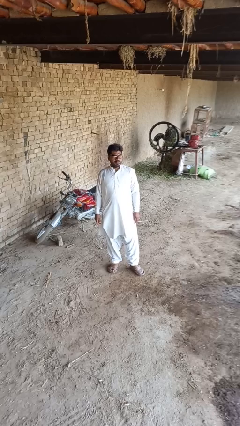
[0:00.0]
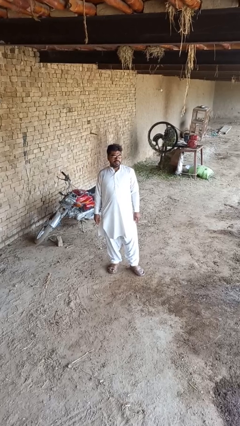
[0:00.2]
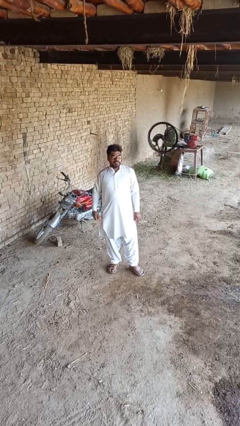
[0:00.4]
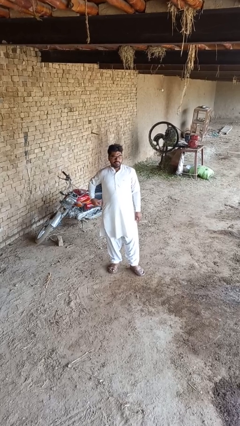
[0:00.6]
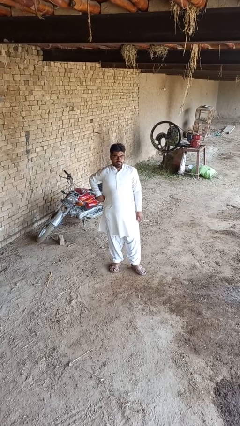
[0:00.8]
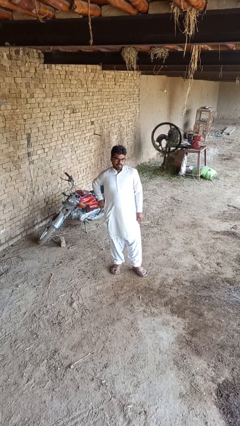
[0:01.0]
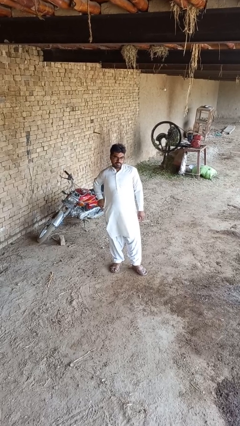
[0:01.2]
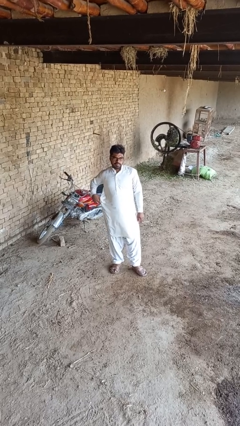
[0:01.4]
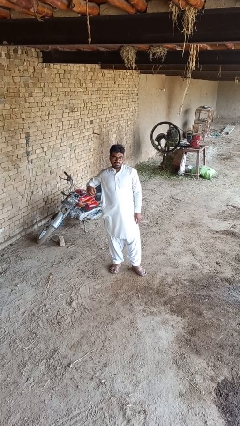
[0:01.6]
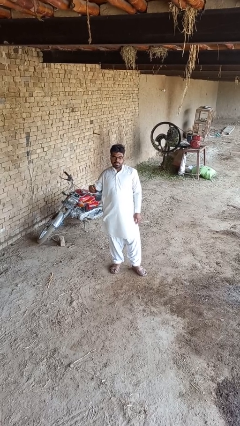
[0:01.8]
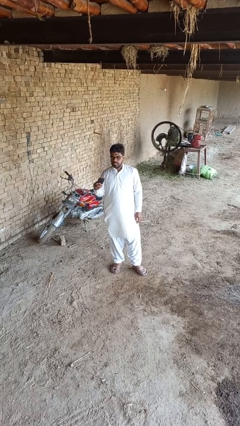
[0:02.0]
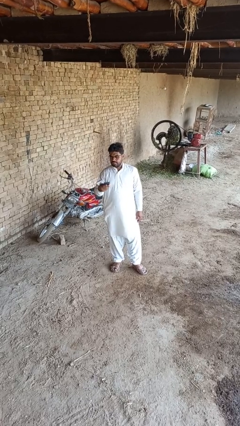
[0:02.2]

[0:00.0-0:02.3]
person takes phone from pocket

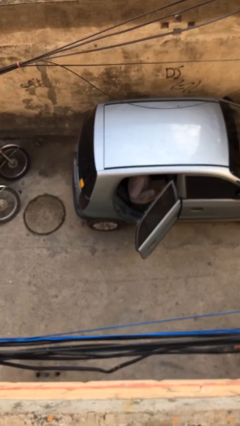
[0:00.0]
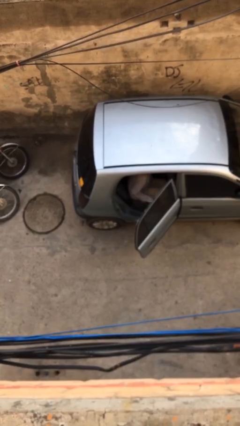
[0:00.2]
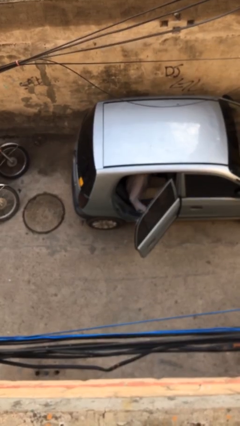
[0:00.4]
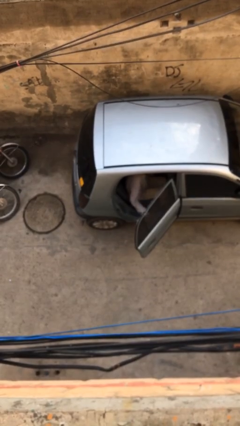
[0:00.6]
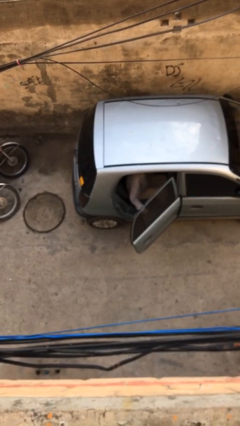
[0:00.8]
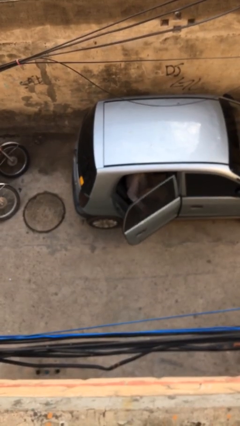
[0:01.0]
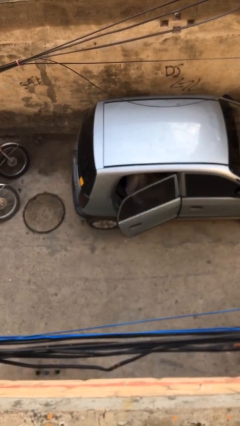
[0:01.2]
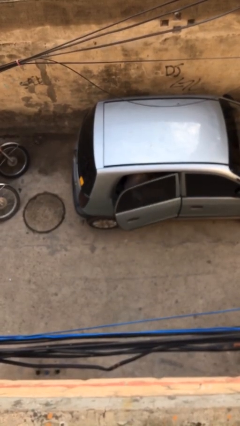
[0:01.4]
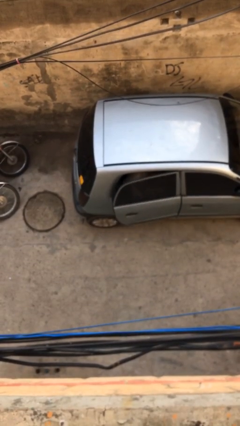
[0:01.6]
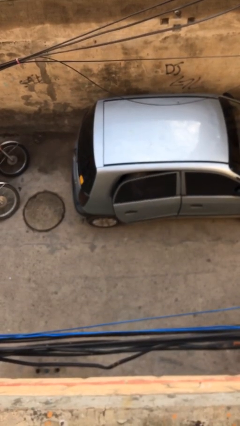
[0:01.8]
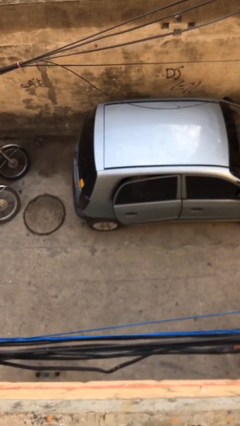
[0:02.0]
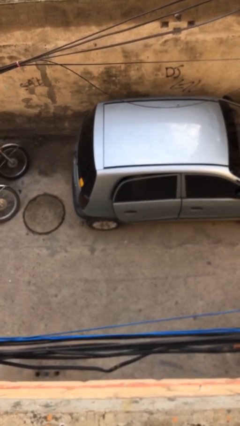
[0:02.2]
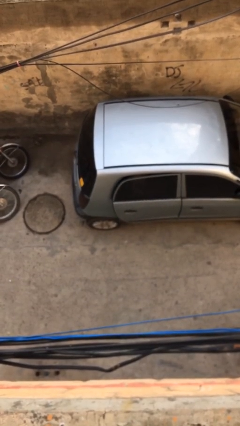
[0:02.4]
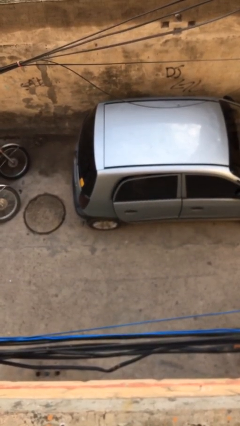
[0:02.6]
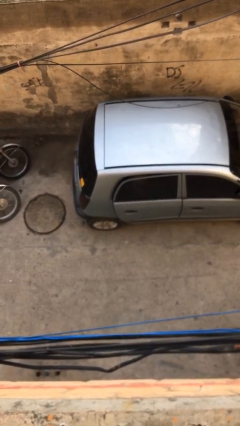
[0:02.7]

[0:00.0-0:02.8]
person closes car door

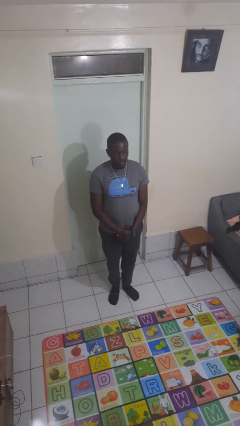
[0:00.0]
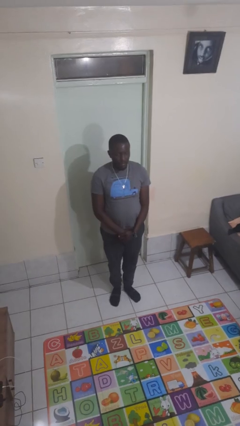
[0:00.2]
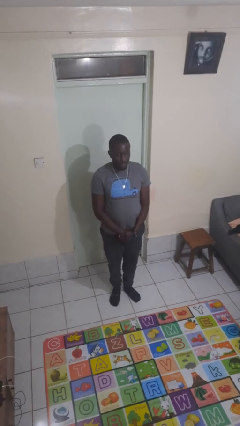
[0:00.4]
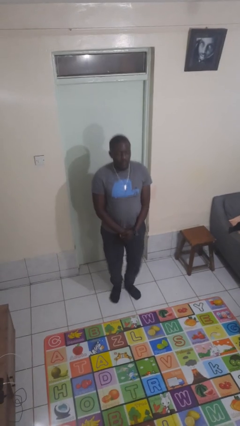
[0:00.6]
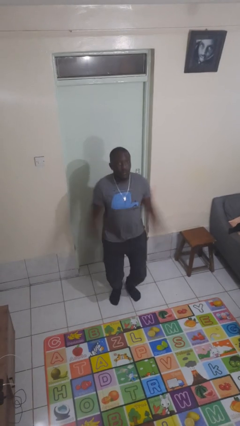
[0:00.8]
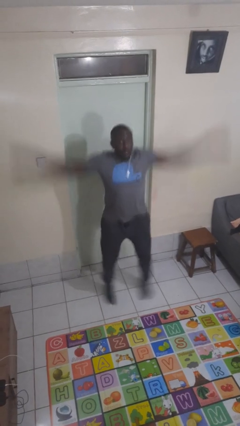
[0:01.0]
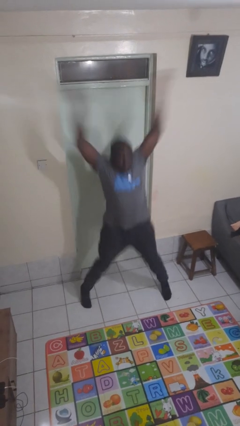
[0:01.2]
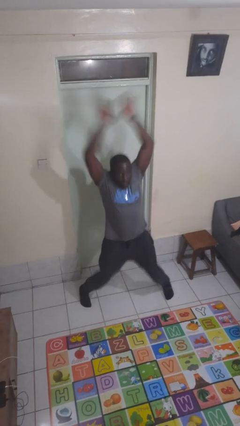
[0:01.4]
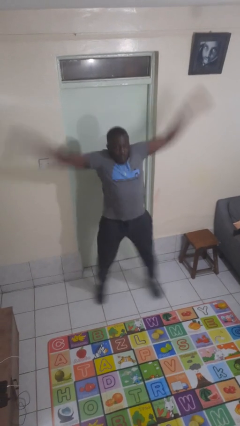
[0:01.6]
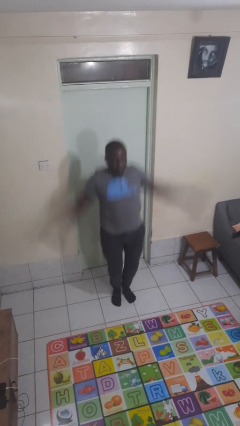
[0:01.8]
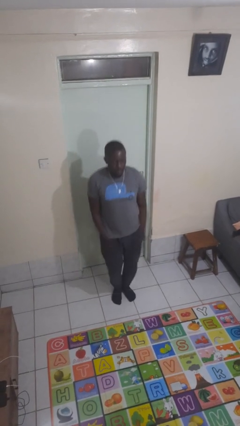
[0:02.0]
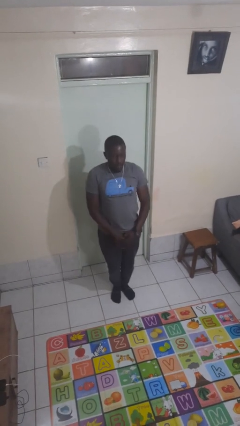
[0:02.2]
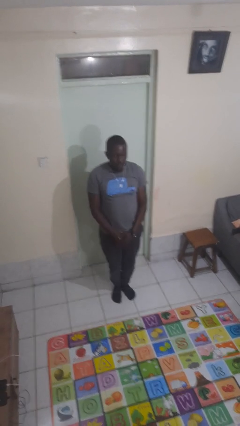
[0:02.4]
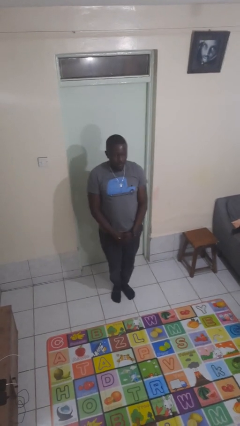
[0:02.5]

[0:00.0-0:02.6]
person exercises with jumping jacks

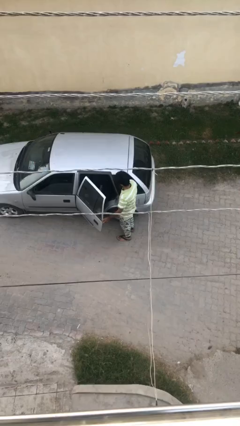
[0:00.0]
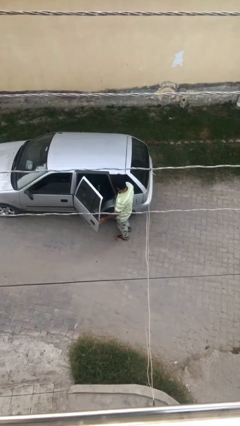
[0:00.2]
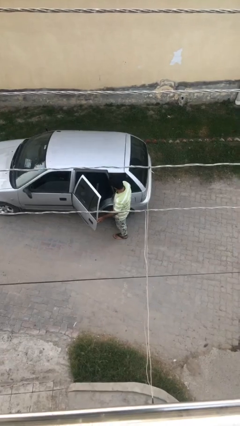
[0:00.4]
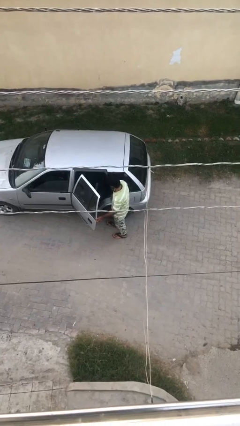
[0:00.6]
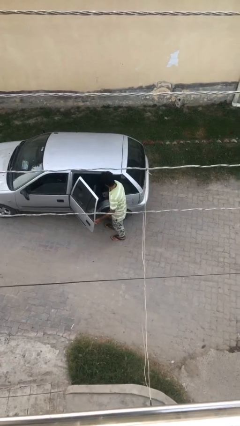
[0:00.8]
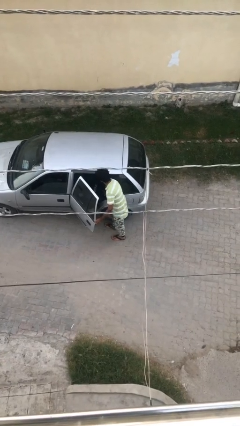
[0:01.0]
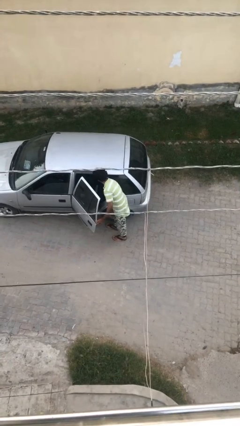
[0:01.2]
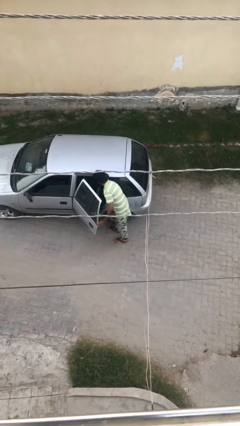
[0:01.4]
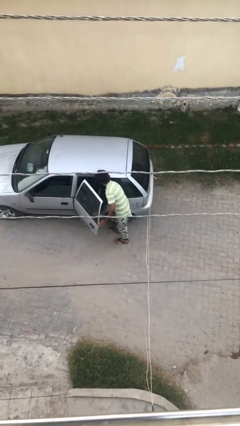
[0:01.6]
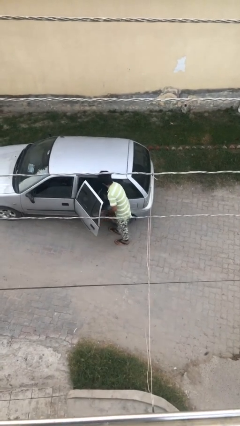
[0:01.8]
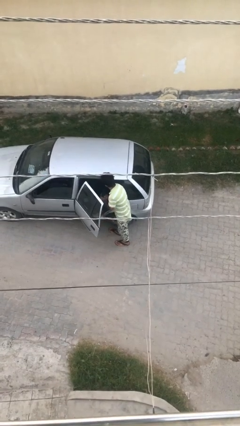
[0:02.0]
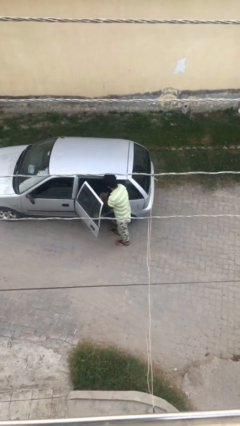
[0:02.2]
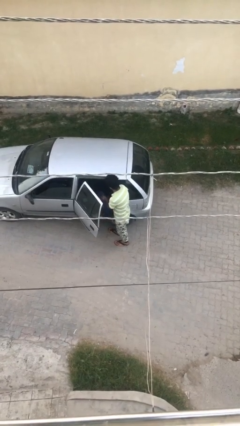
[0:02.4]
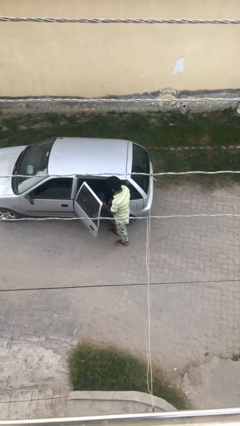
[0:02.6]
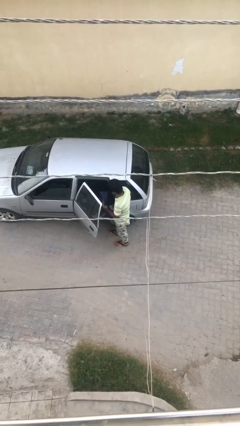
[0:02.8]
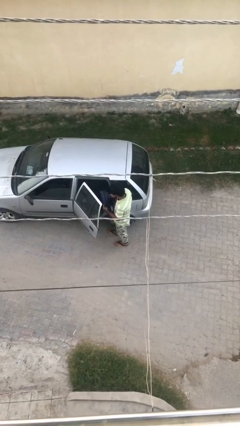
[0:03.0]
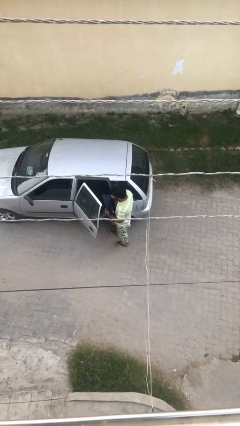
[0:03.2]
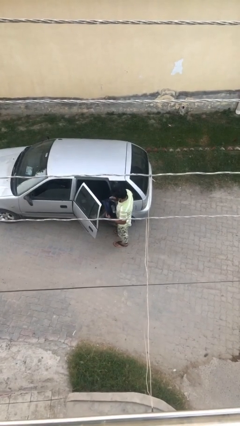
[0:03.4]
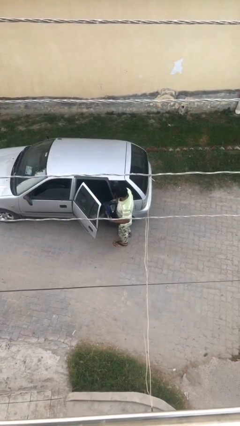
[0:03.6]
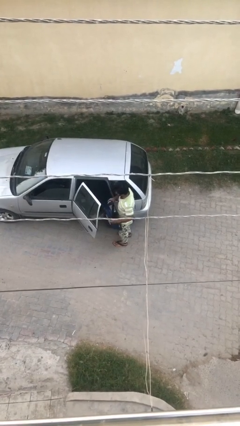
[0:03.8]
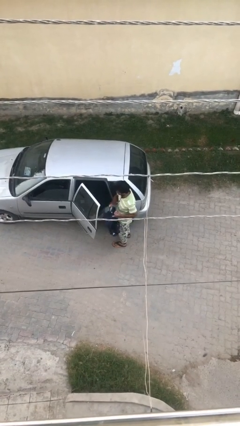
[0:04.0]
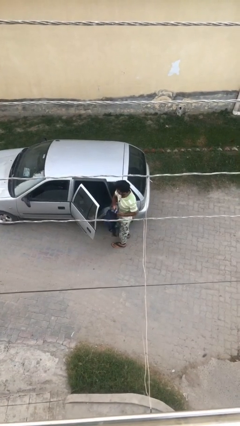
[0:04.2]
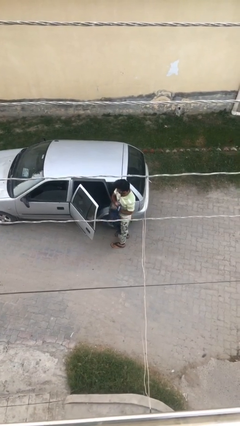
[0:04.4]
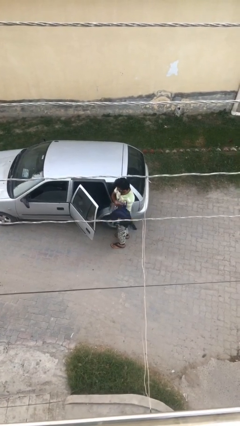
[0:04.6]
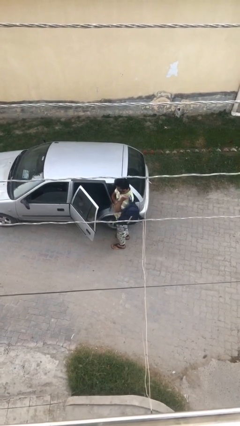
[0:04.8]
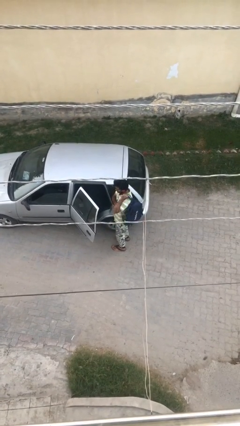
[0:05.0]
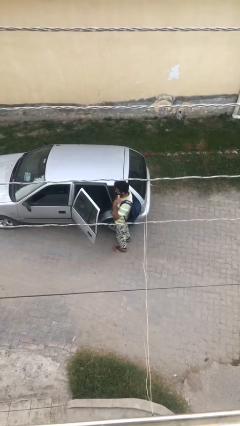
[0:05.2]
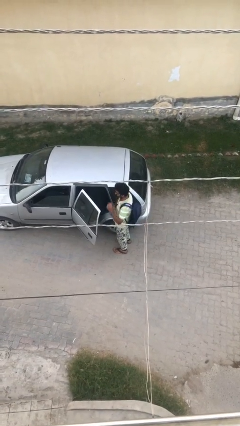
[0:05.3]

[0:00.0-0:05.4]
person unloads car

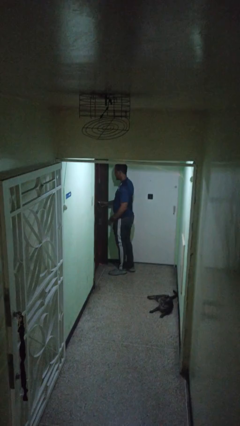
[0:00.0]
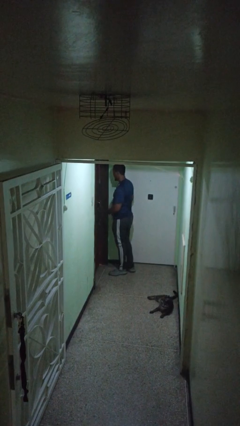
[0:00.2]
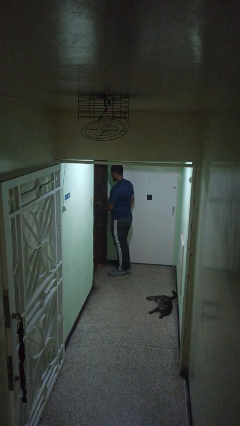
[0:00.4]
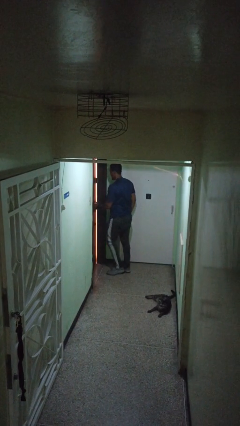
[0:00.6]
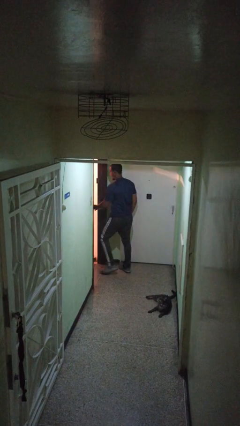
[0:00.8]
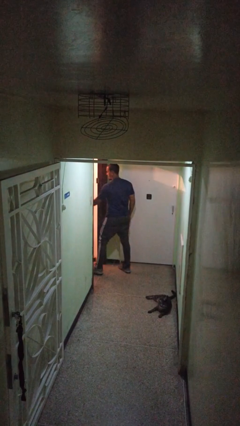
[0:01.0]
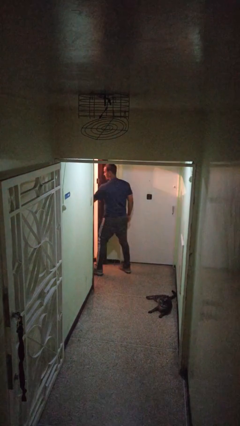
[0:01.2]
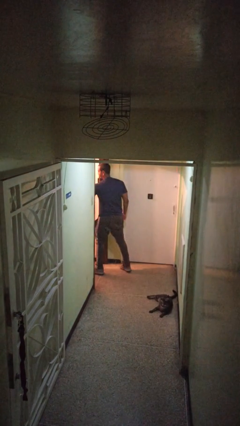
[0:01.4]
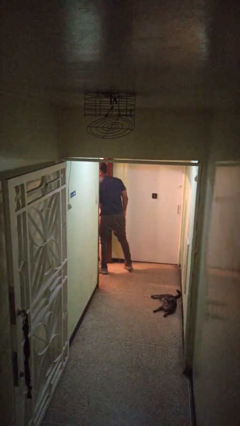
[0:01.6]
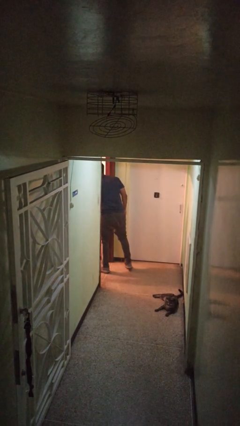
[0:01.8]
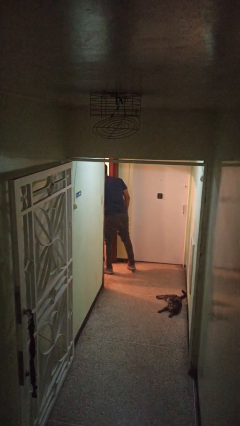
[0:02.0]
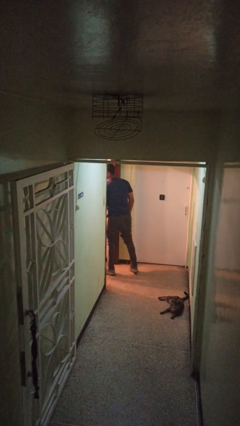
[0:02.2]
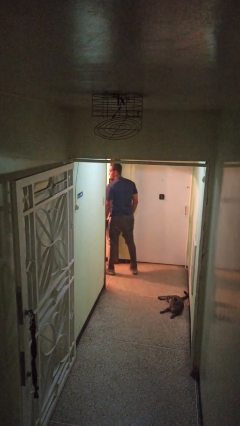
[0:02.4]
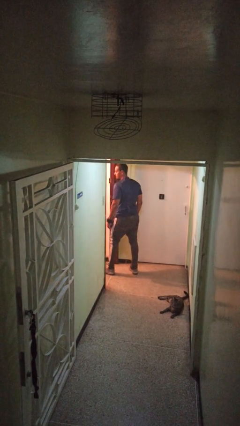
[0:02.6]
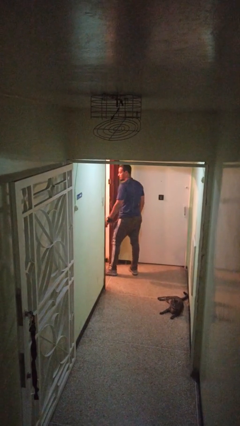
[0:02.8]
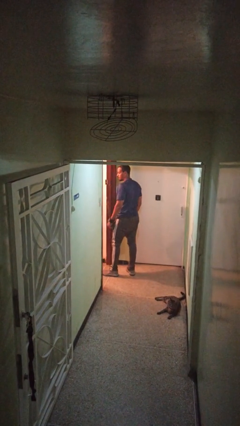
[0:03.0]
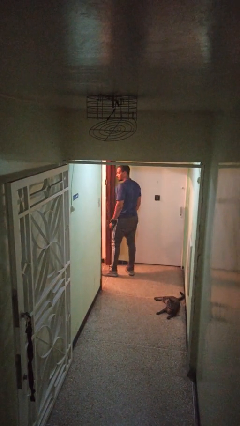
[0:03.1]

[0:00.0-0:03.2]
person opens facility door

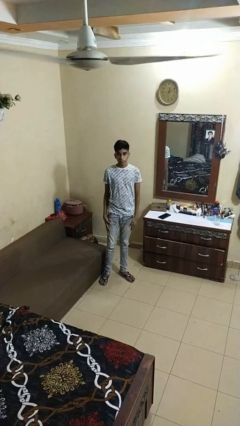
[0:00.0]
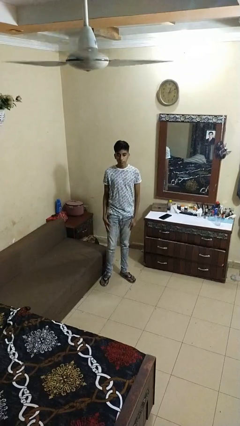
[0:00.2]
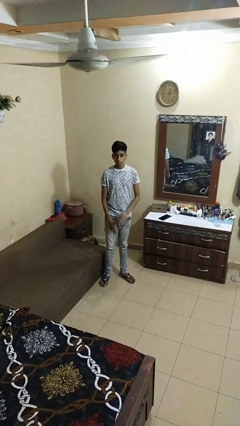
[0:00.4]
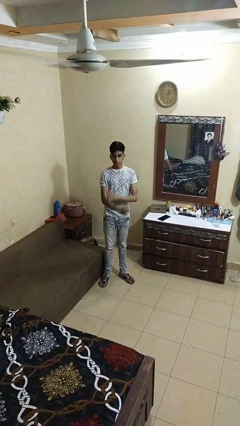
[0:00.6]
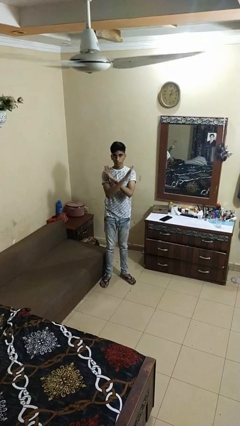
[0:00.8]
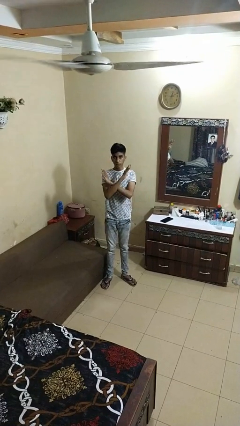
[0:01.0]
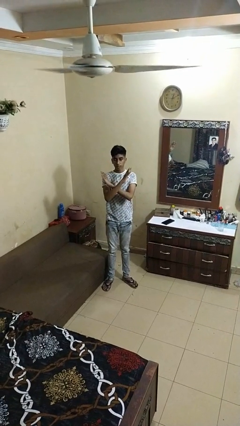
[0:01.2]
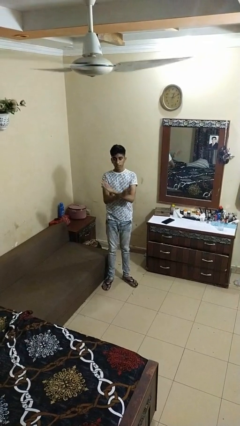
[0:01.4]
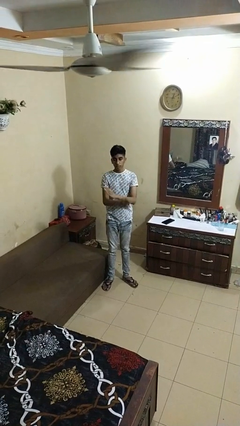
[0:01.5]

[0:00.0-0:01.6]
person gestures arms x
